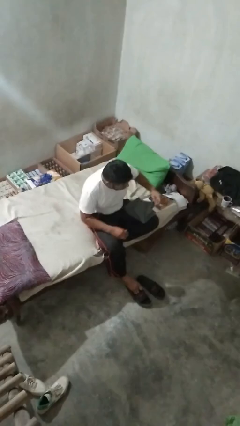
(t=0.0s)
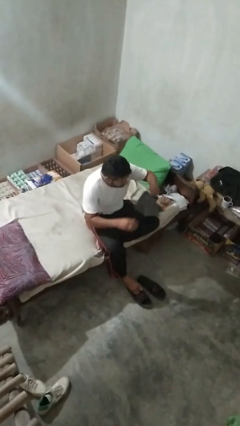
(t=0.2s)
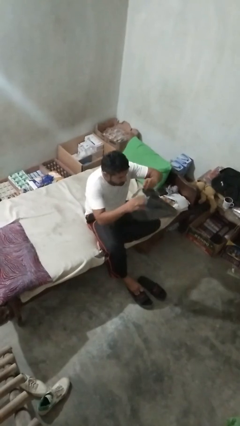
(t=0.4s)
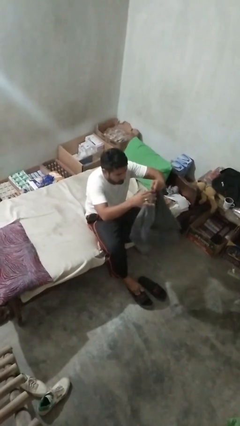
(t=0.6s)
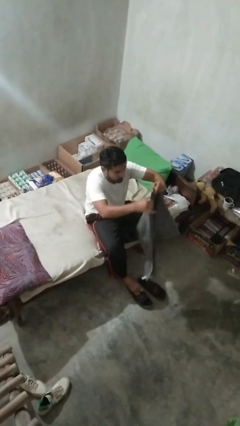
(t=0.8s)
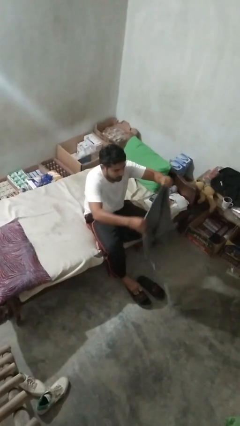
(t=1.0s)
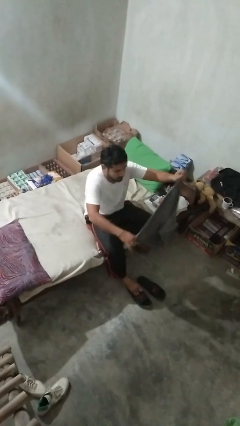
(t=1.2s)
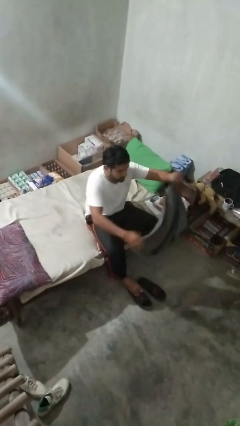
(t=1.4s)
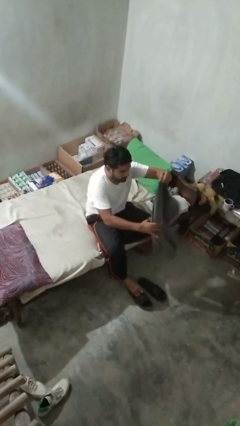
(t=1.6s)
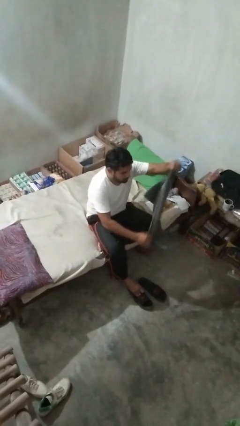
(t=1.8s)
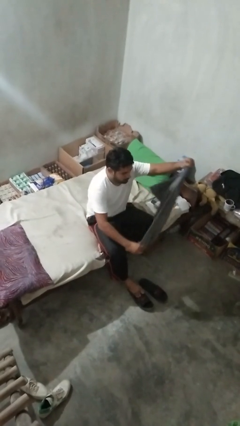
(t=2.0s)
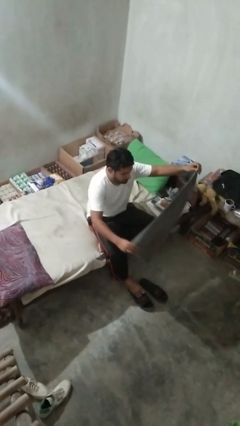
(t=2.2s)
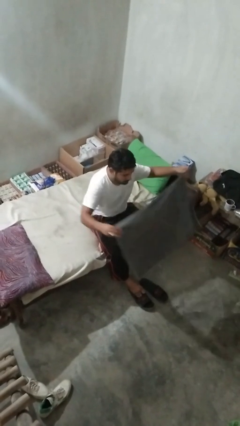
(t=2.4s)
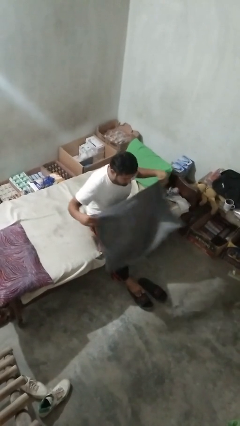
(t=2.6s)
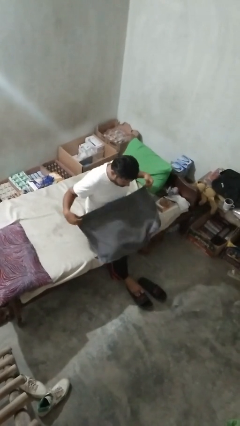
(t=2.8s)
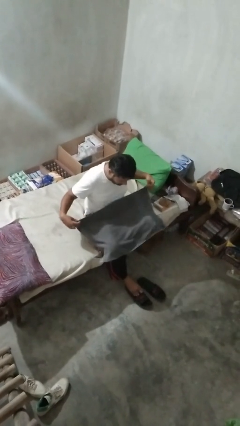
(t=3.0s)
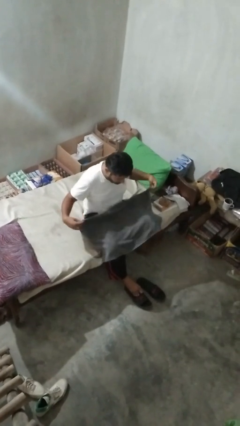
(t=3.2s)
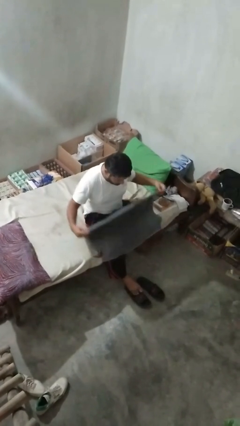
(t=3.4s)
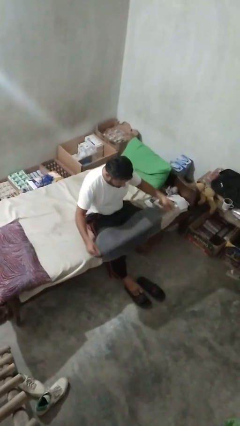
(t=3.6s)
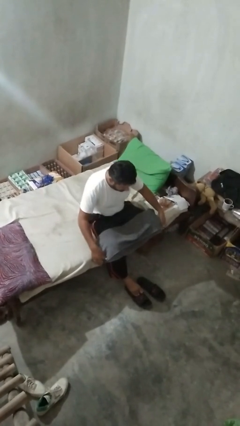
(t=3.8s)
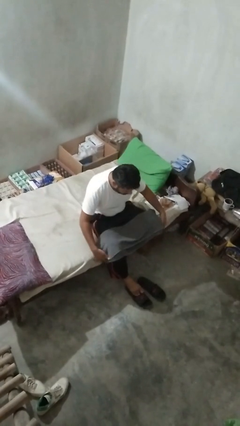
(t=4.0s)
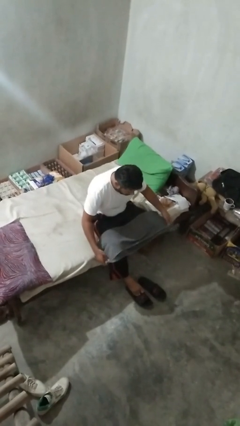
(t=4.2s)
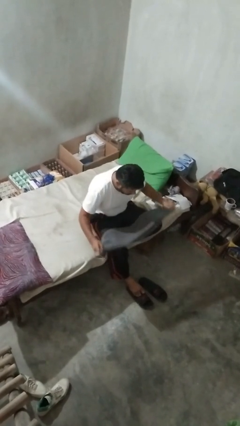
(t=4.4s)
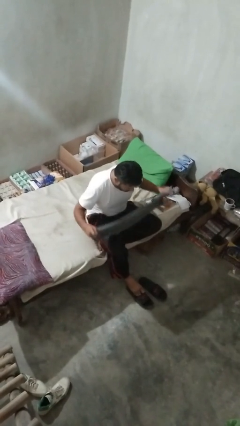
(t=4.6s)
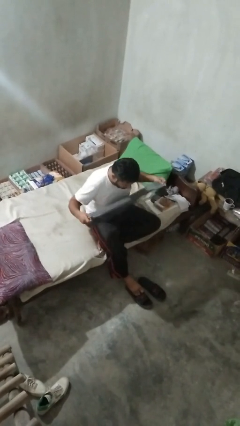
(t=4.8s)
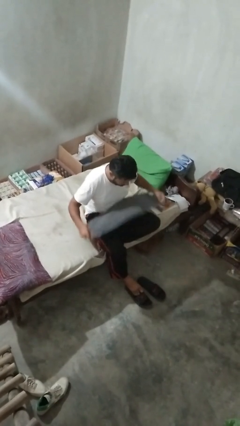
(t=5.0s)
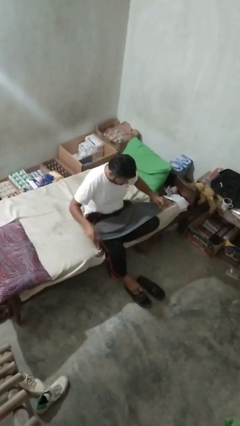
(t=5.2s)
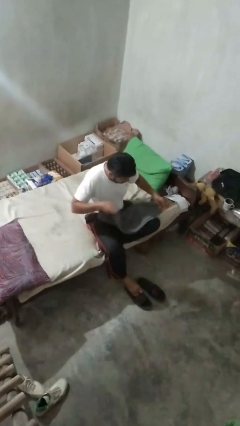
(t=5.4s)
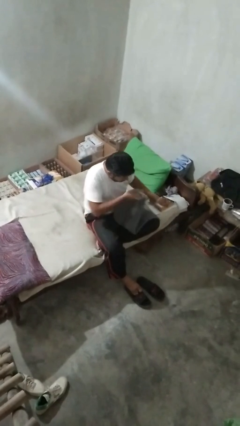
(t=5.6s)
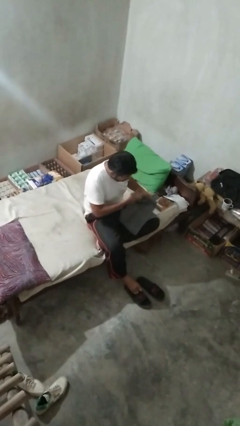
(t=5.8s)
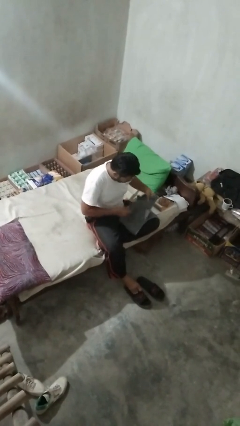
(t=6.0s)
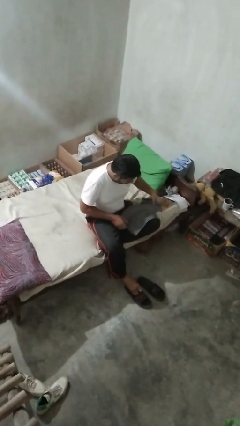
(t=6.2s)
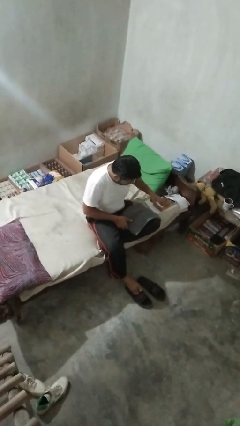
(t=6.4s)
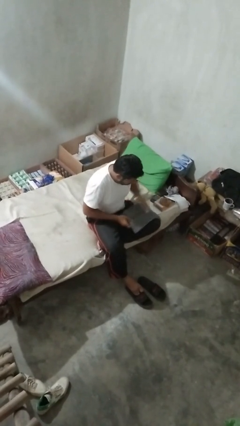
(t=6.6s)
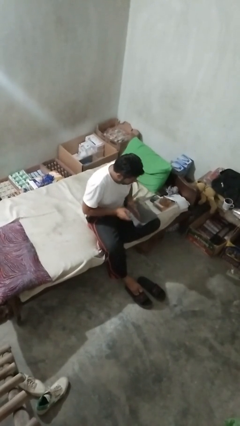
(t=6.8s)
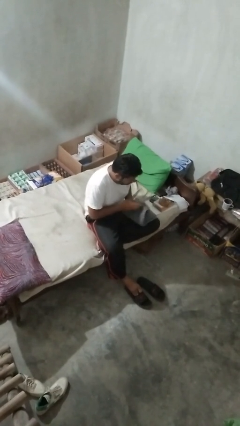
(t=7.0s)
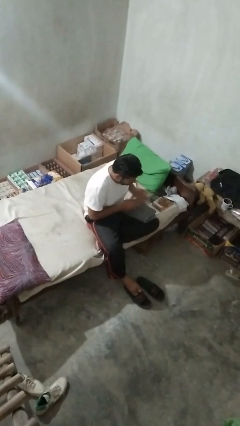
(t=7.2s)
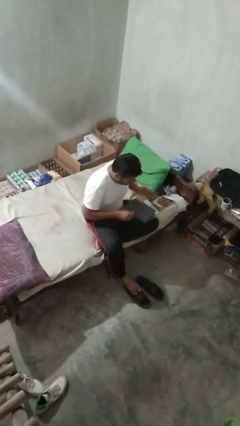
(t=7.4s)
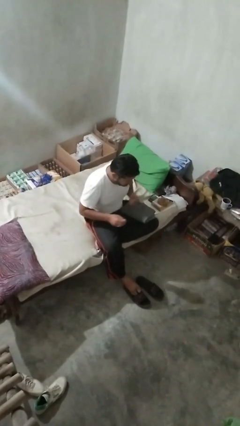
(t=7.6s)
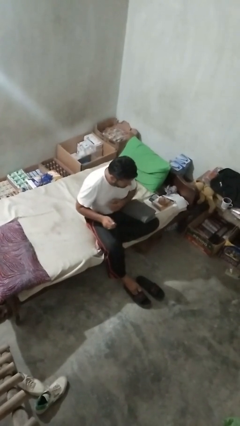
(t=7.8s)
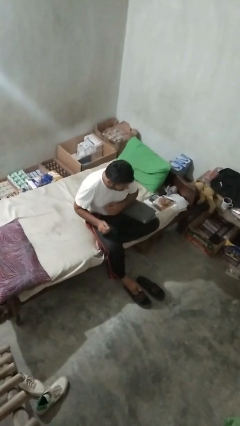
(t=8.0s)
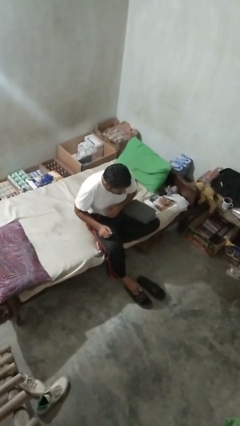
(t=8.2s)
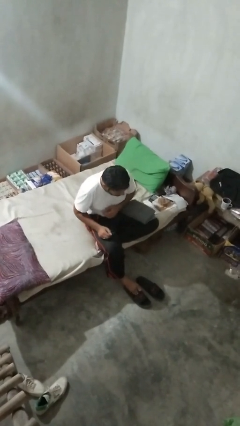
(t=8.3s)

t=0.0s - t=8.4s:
person folds towel

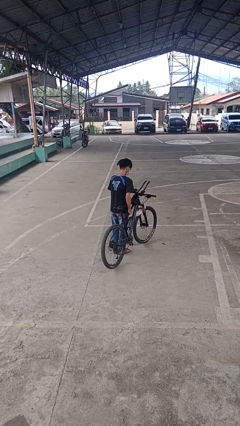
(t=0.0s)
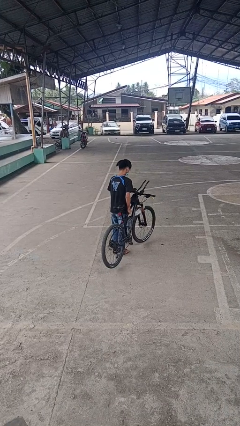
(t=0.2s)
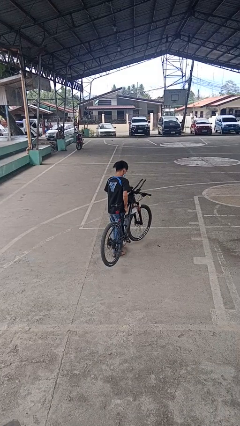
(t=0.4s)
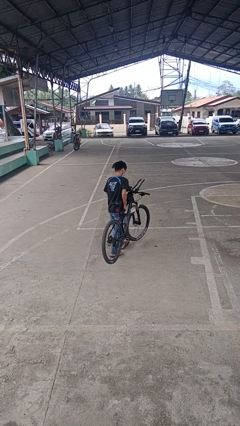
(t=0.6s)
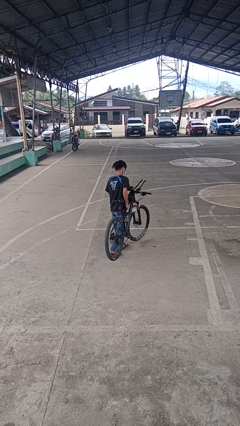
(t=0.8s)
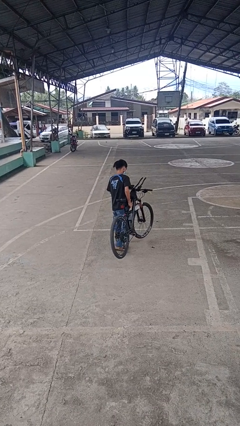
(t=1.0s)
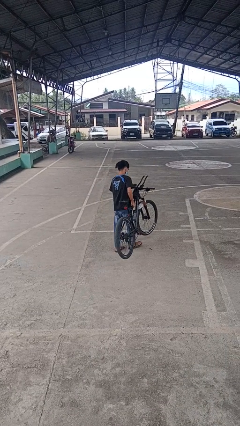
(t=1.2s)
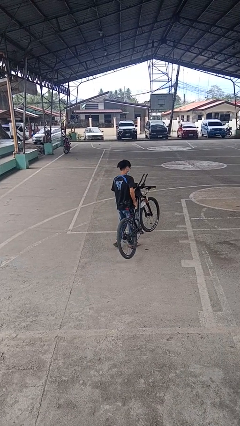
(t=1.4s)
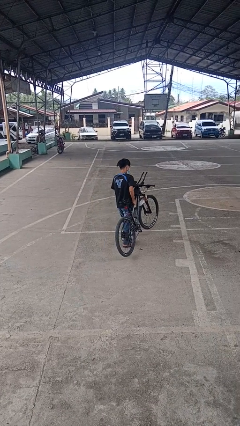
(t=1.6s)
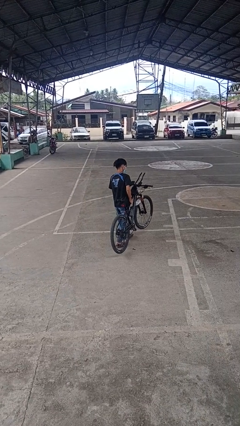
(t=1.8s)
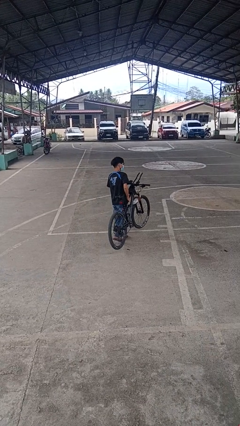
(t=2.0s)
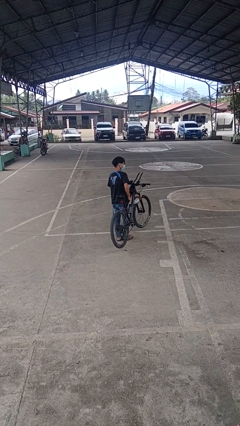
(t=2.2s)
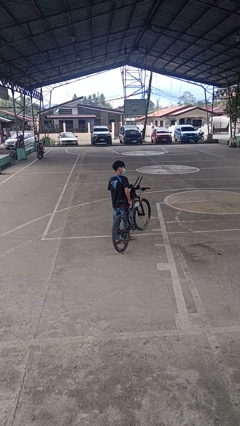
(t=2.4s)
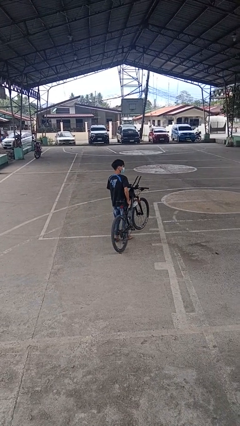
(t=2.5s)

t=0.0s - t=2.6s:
person carries bicycle

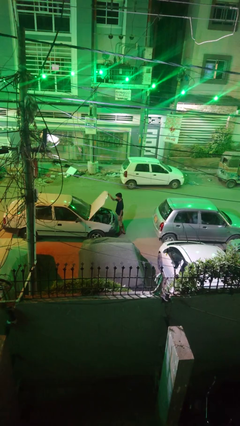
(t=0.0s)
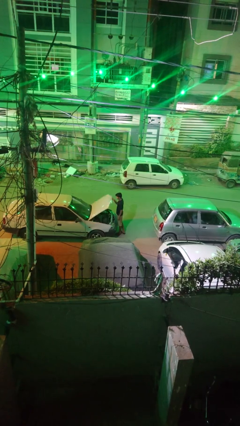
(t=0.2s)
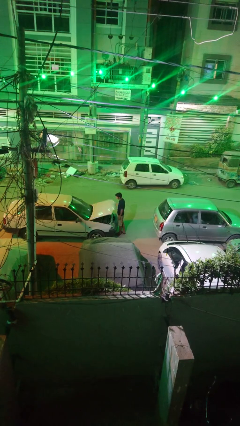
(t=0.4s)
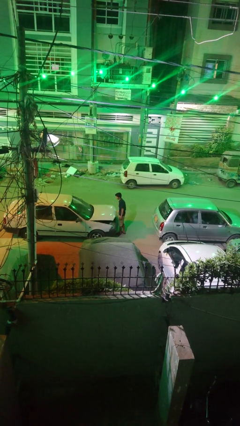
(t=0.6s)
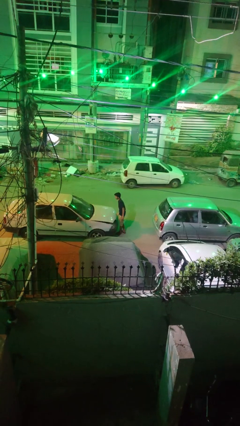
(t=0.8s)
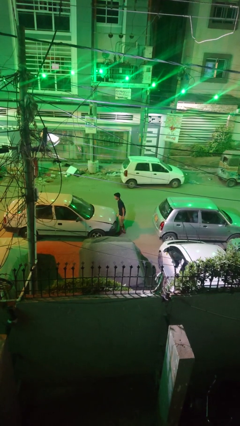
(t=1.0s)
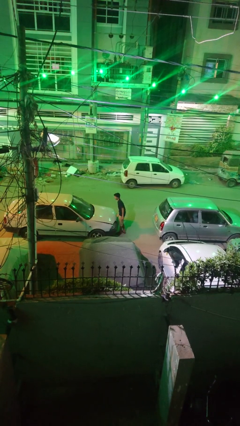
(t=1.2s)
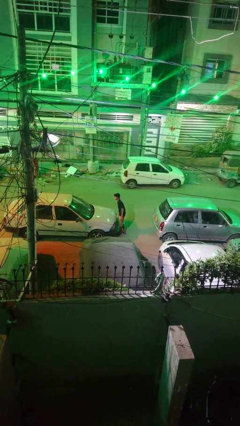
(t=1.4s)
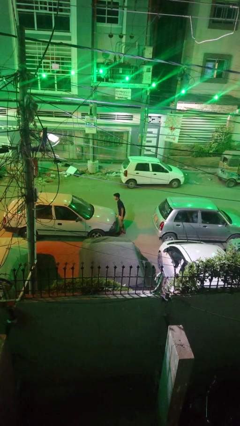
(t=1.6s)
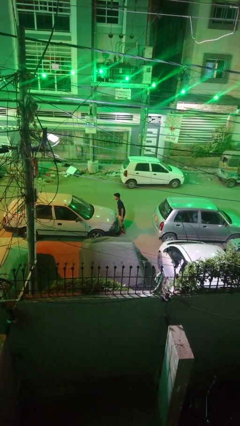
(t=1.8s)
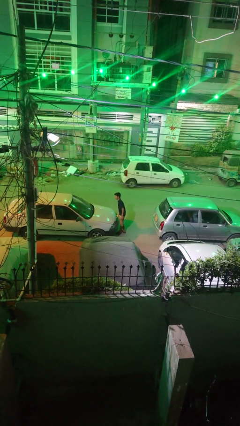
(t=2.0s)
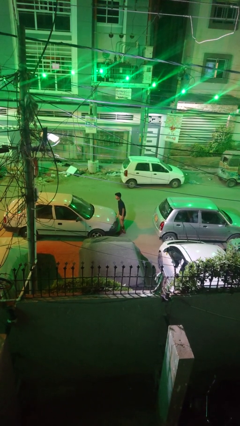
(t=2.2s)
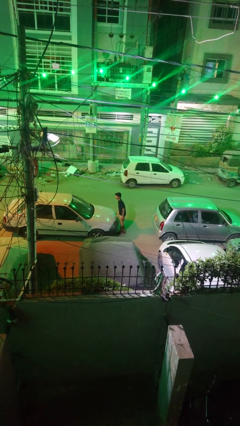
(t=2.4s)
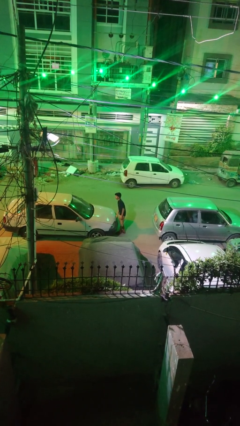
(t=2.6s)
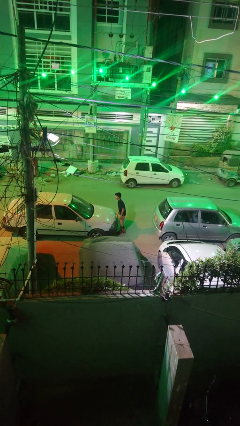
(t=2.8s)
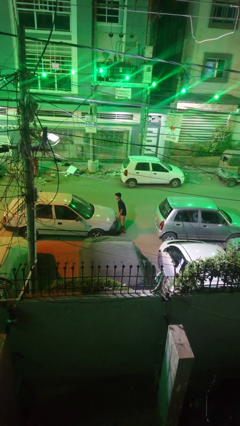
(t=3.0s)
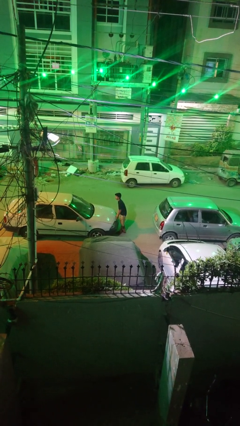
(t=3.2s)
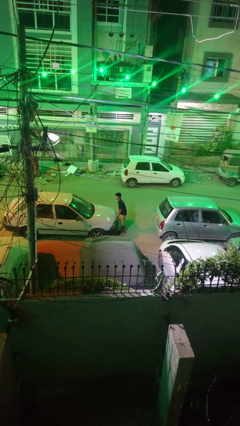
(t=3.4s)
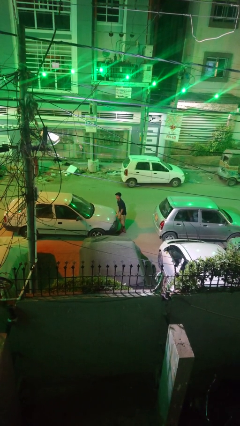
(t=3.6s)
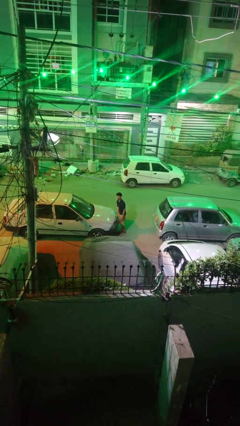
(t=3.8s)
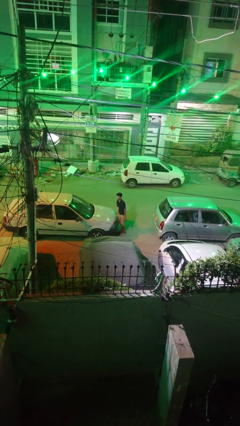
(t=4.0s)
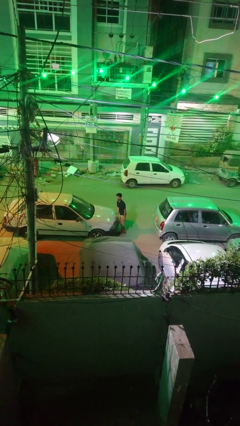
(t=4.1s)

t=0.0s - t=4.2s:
person closes car hood

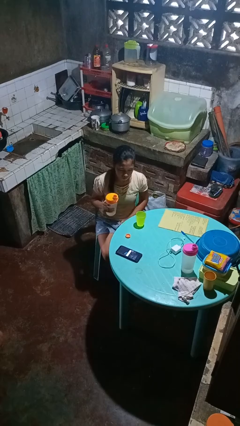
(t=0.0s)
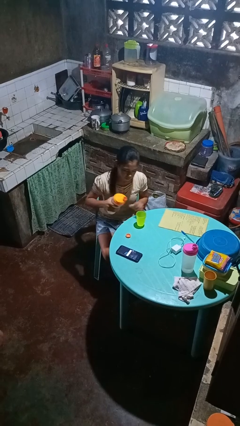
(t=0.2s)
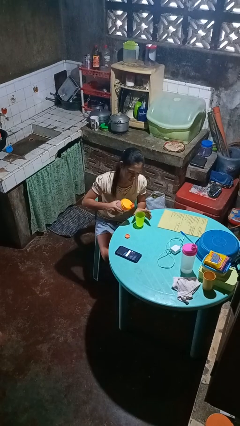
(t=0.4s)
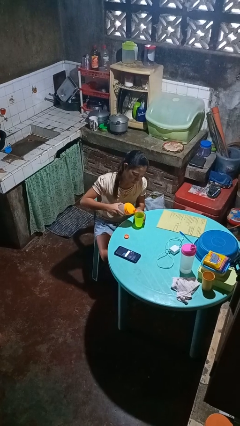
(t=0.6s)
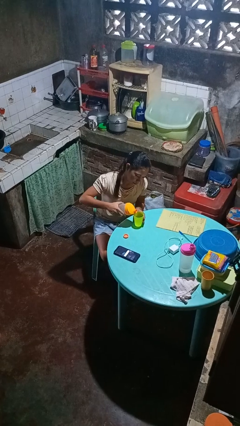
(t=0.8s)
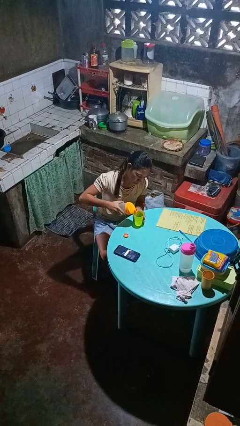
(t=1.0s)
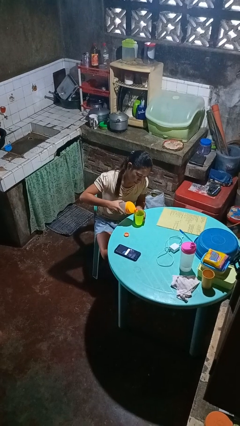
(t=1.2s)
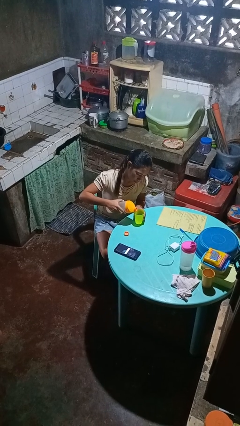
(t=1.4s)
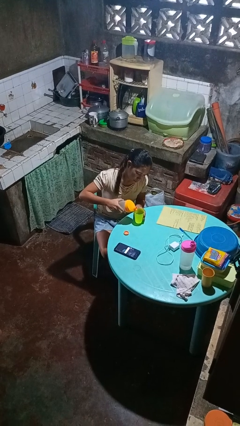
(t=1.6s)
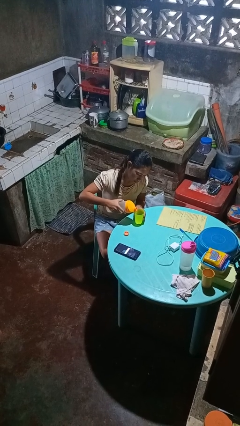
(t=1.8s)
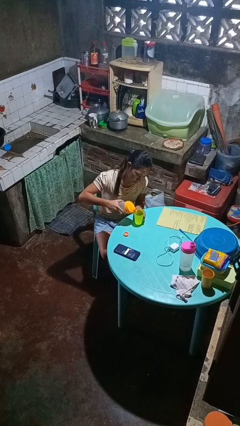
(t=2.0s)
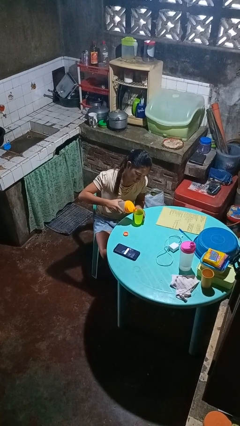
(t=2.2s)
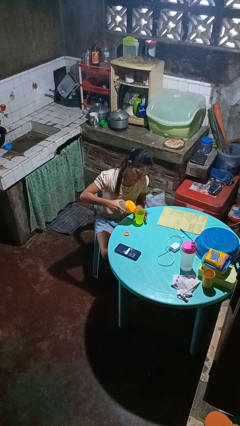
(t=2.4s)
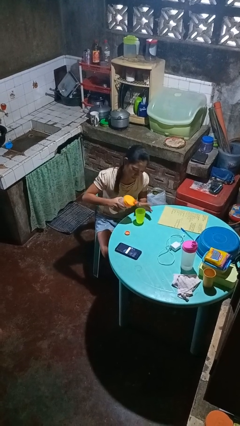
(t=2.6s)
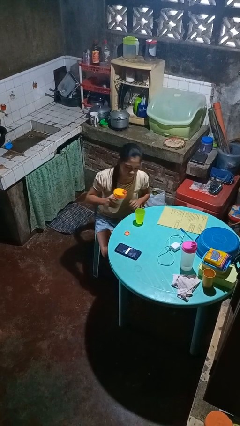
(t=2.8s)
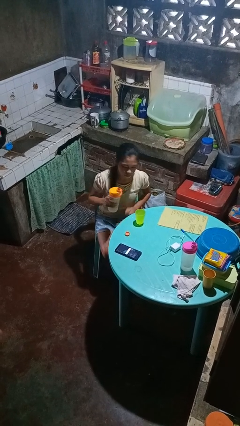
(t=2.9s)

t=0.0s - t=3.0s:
person pours liquid into cup
